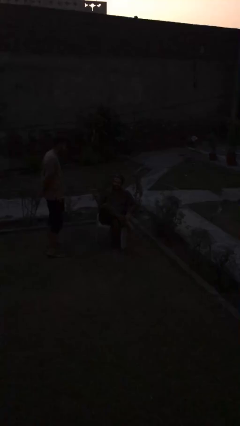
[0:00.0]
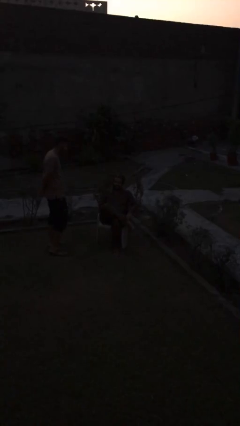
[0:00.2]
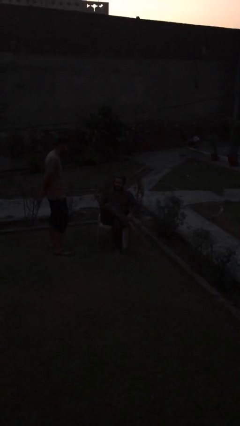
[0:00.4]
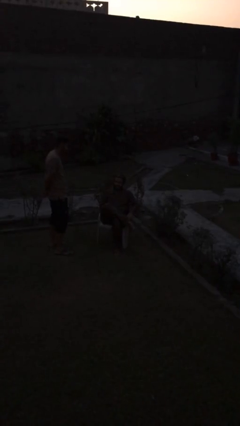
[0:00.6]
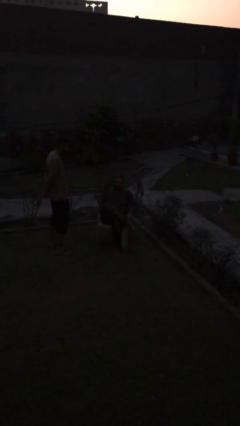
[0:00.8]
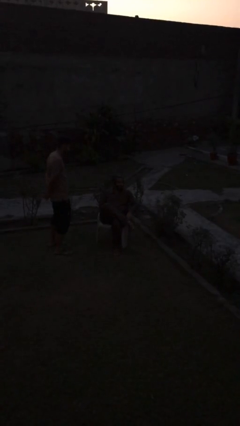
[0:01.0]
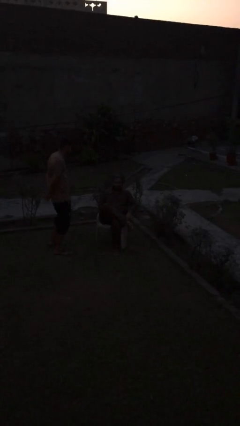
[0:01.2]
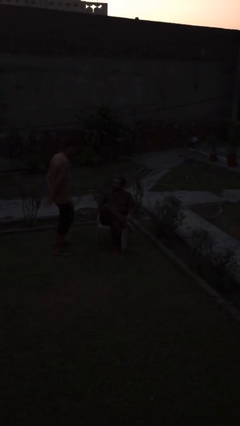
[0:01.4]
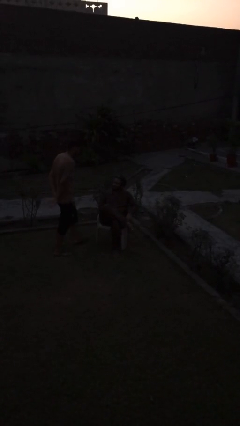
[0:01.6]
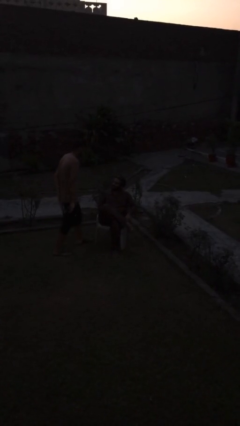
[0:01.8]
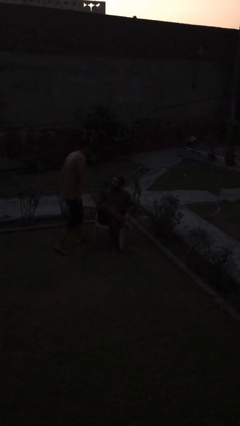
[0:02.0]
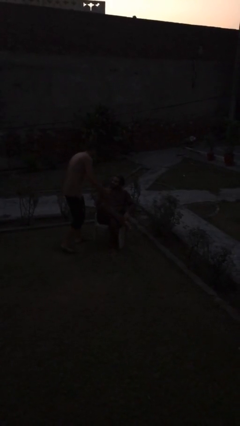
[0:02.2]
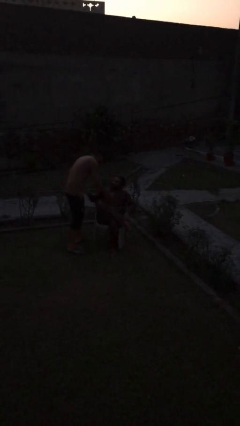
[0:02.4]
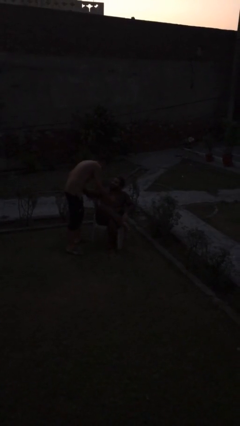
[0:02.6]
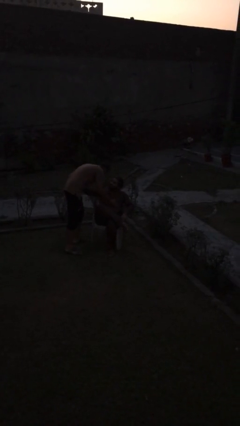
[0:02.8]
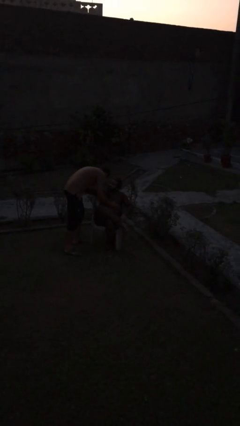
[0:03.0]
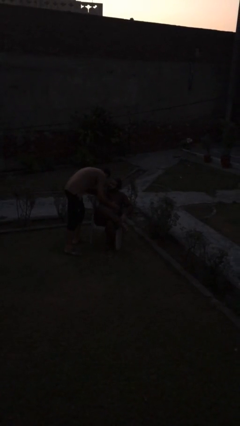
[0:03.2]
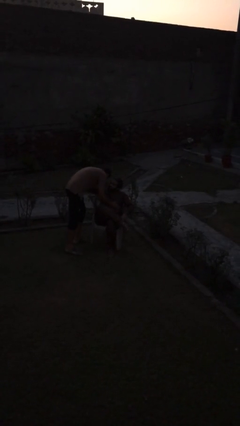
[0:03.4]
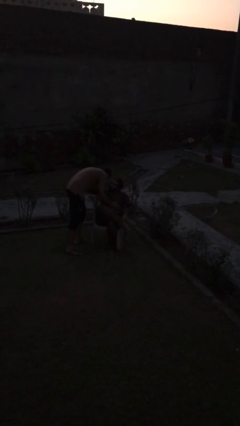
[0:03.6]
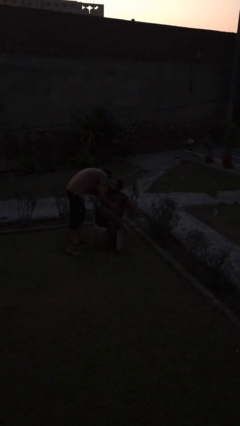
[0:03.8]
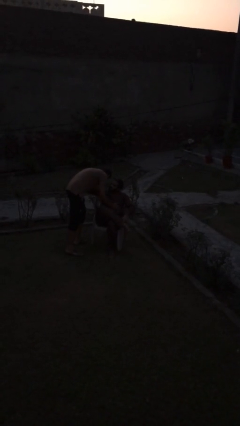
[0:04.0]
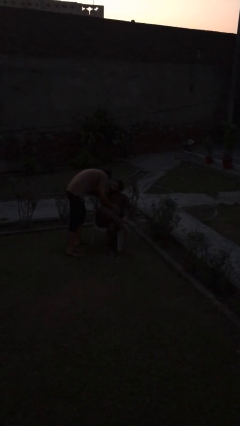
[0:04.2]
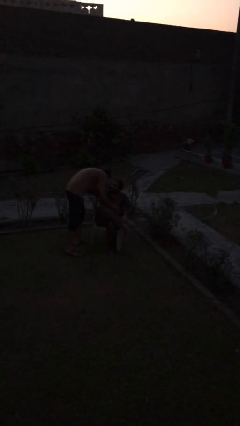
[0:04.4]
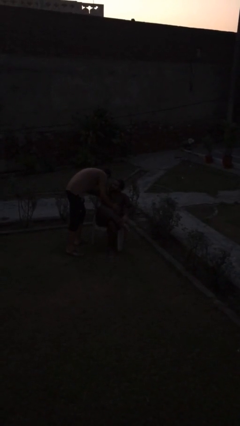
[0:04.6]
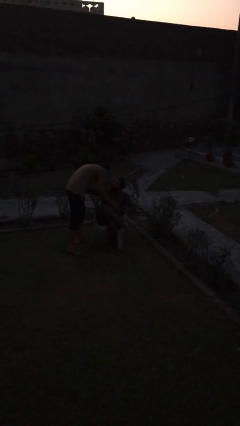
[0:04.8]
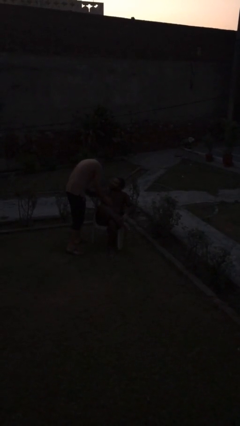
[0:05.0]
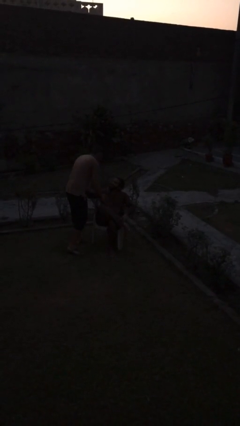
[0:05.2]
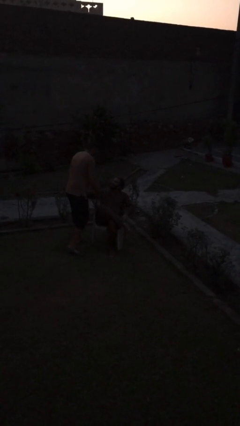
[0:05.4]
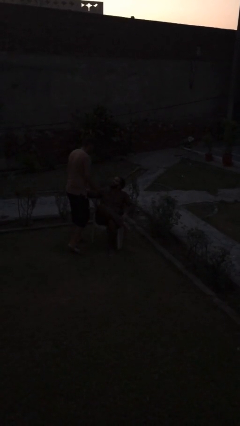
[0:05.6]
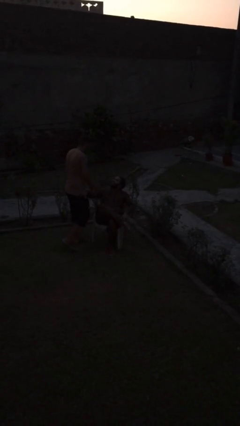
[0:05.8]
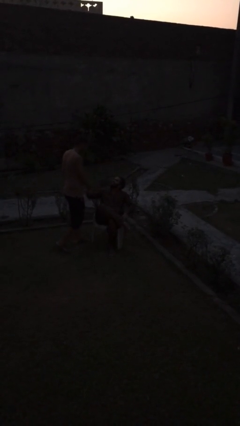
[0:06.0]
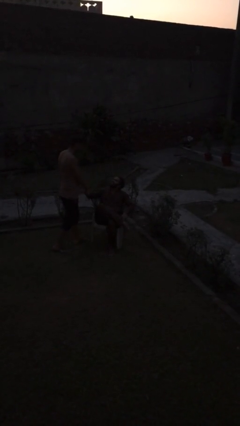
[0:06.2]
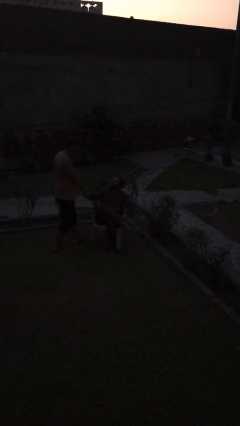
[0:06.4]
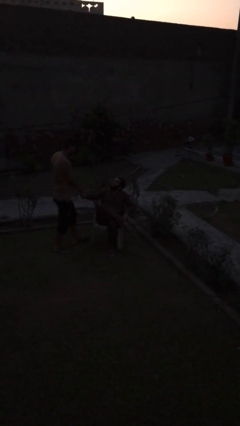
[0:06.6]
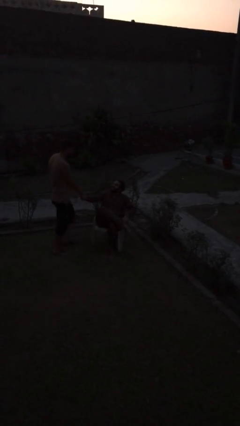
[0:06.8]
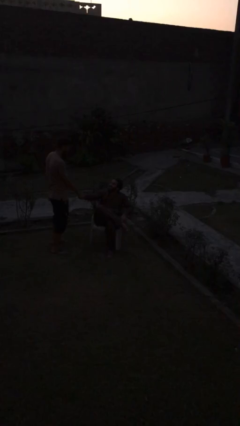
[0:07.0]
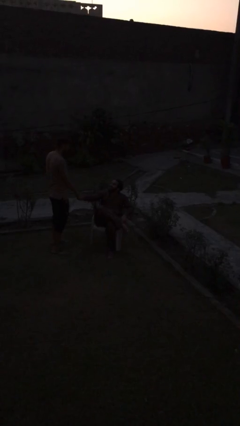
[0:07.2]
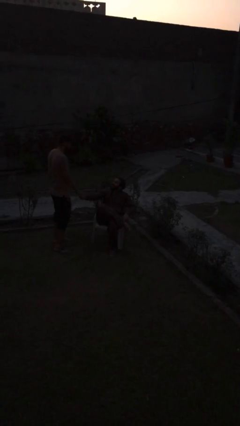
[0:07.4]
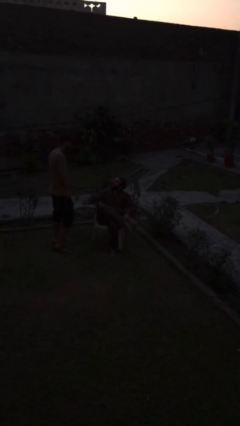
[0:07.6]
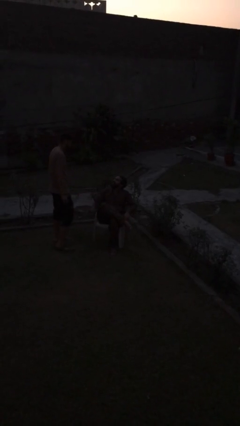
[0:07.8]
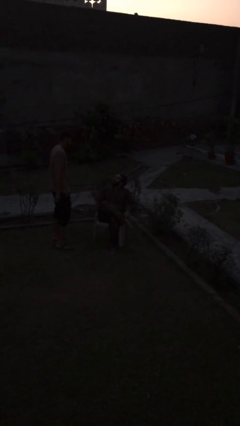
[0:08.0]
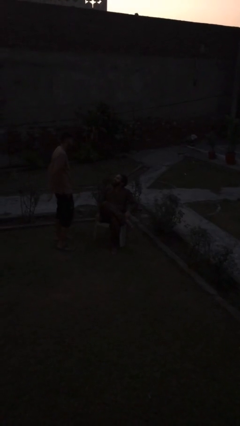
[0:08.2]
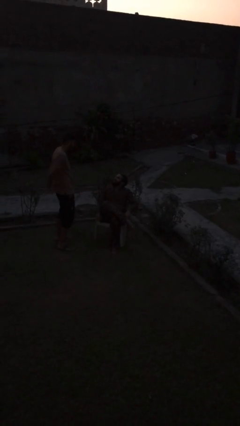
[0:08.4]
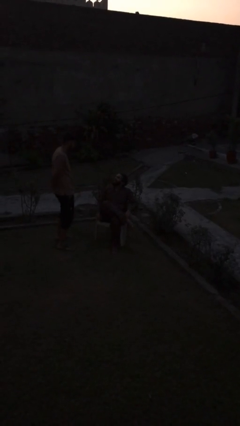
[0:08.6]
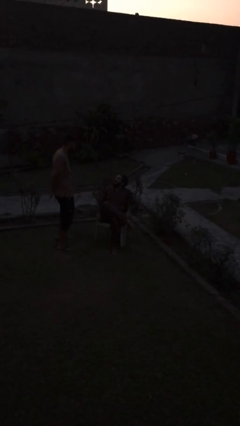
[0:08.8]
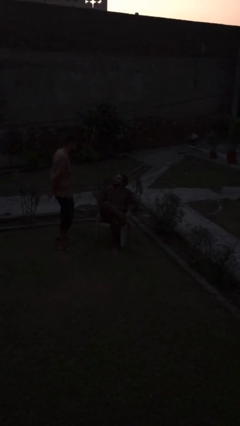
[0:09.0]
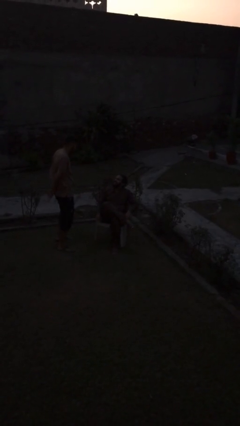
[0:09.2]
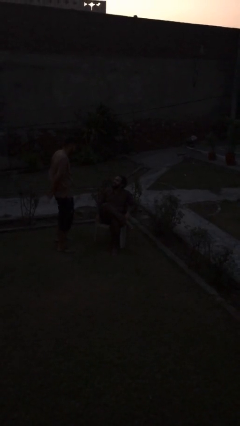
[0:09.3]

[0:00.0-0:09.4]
person embraces person

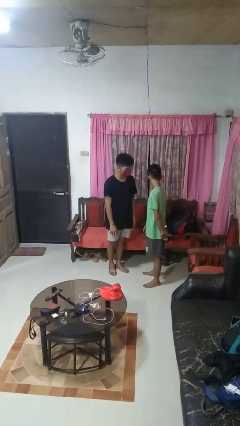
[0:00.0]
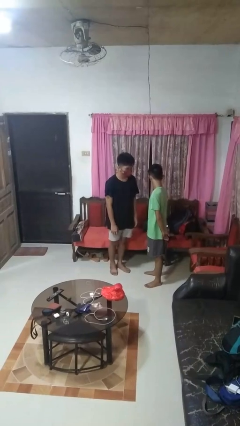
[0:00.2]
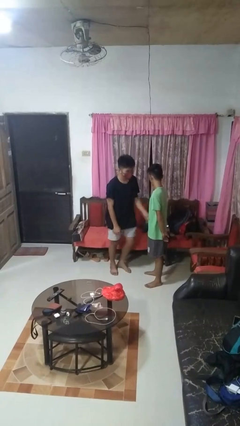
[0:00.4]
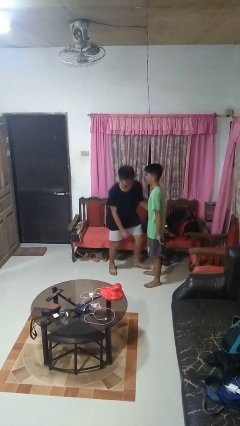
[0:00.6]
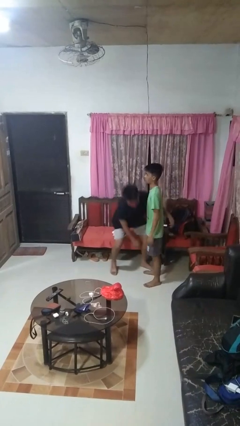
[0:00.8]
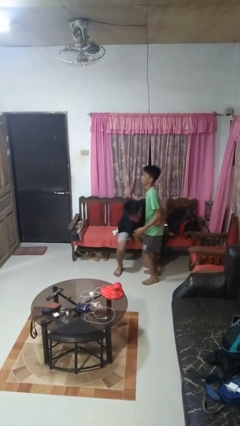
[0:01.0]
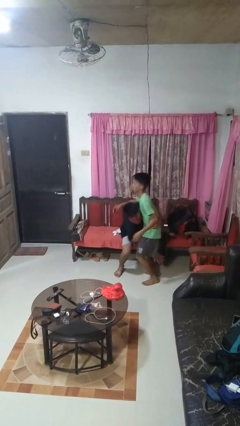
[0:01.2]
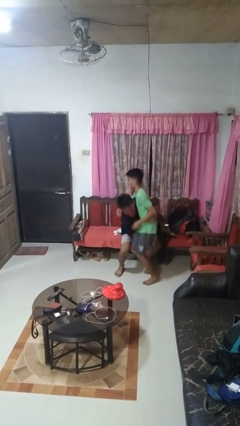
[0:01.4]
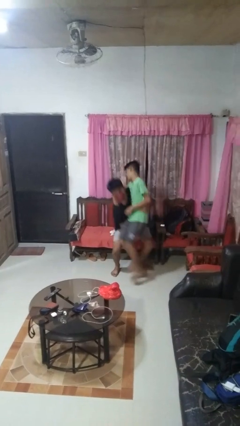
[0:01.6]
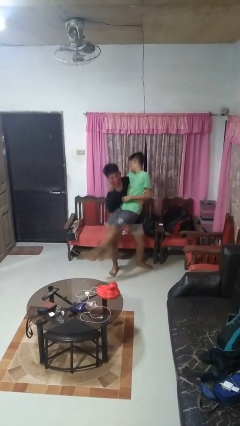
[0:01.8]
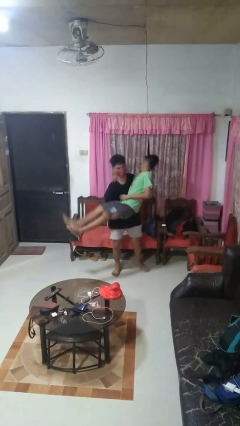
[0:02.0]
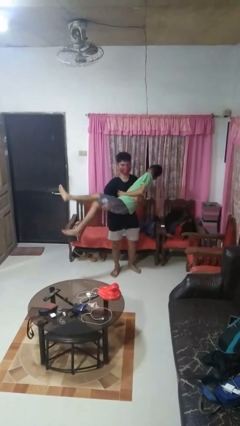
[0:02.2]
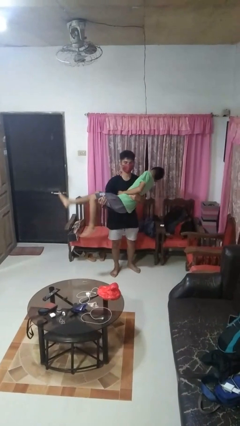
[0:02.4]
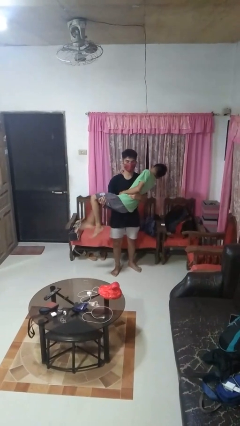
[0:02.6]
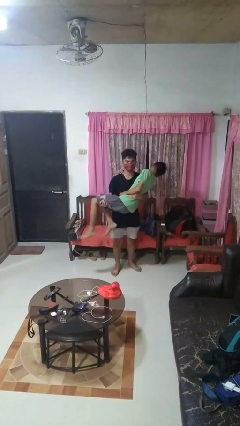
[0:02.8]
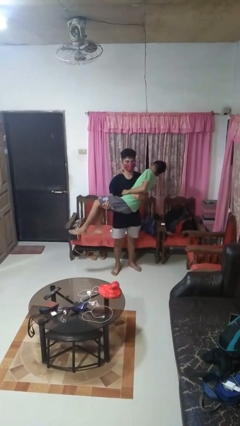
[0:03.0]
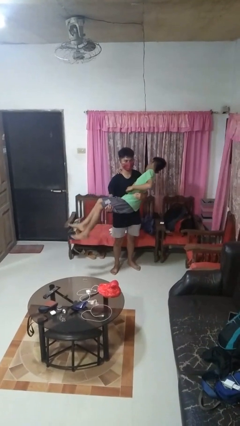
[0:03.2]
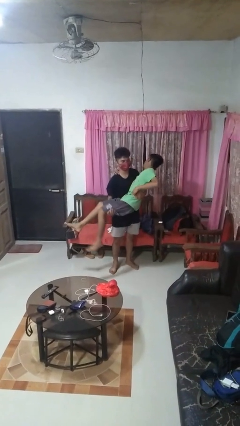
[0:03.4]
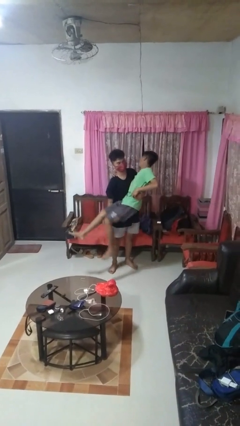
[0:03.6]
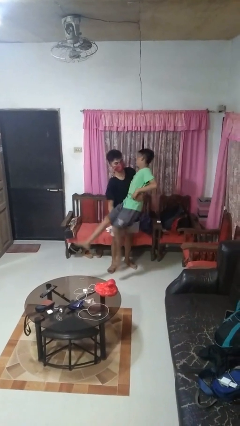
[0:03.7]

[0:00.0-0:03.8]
person picks up person

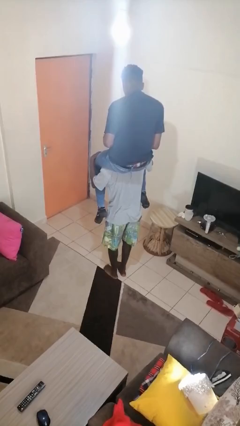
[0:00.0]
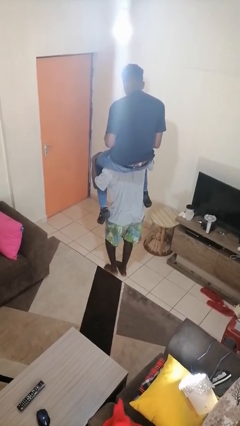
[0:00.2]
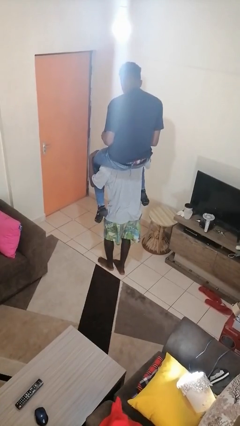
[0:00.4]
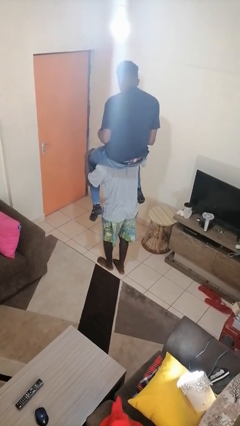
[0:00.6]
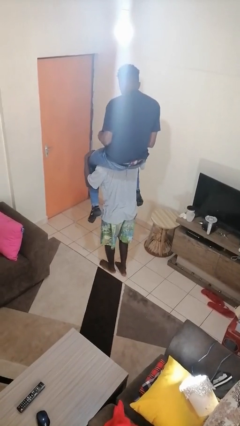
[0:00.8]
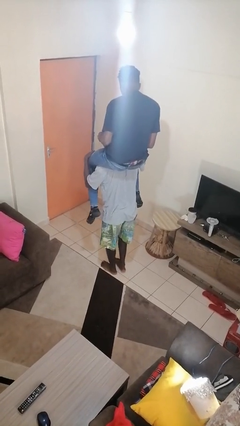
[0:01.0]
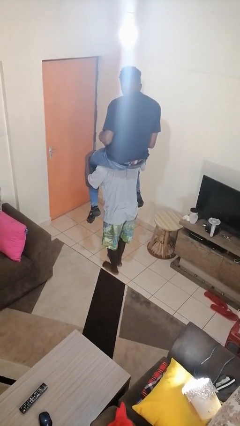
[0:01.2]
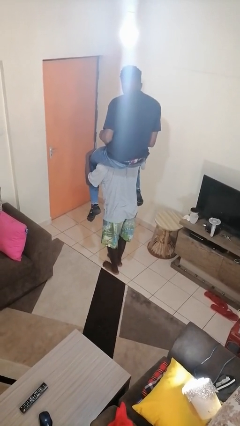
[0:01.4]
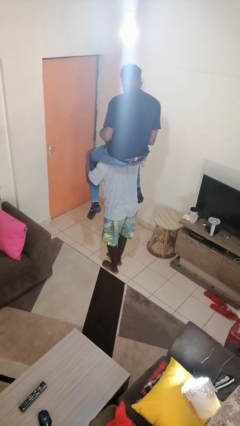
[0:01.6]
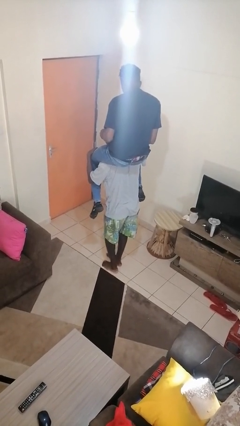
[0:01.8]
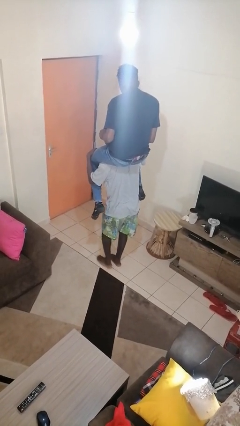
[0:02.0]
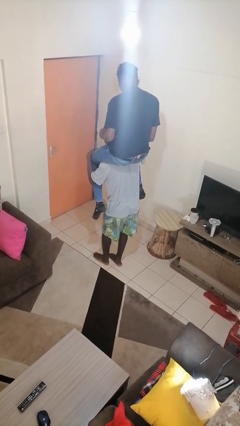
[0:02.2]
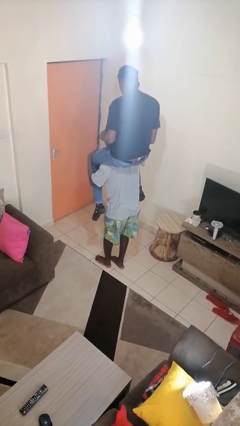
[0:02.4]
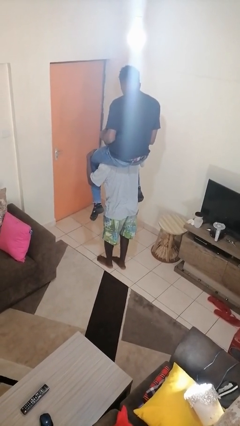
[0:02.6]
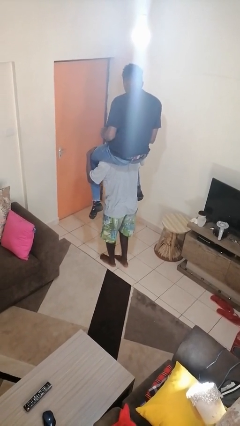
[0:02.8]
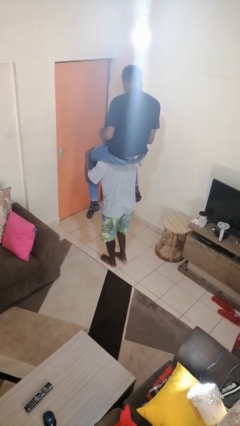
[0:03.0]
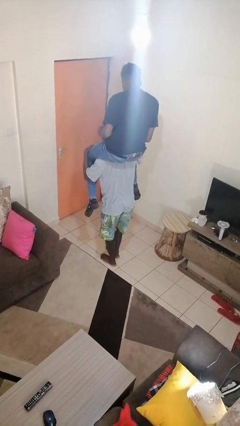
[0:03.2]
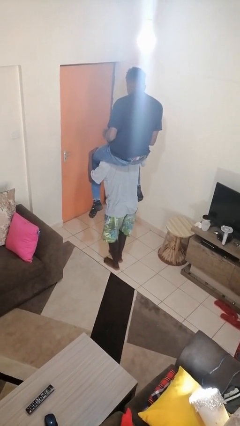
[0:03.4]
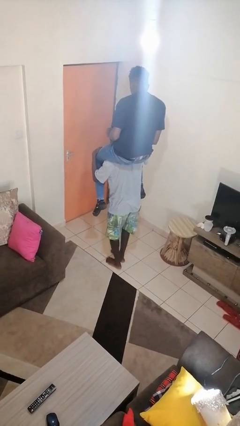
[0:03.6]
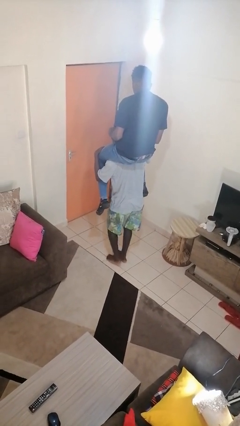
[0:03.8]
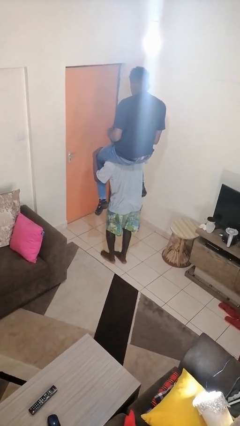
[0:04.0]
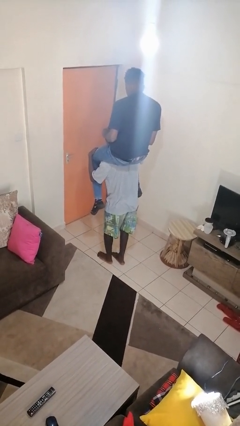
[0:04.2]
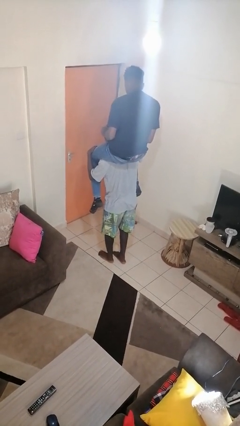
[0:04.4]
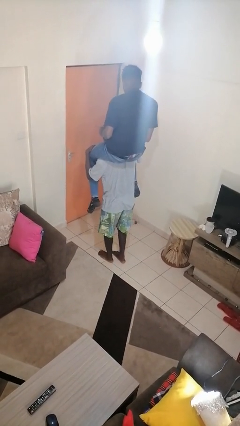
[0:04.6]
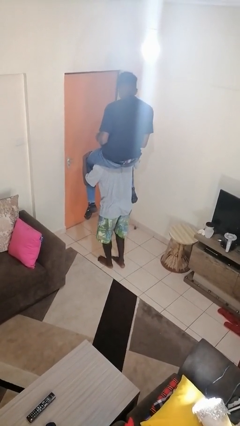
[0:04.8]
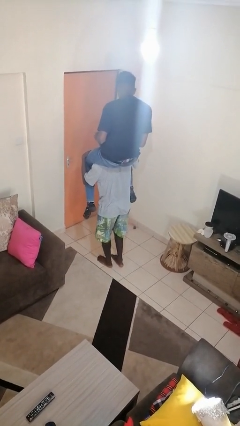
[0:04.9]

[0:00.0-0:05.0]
person carries person on shoulders
